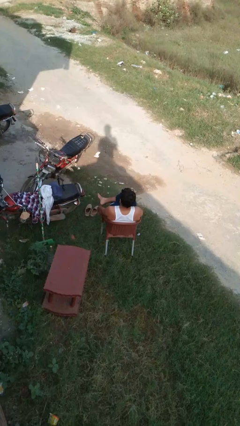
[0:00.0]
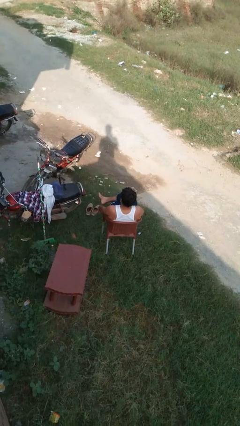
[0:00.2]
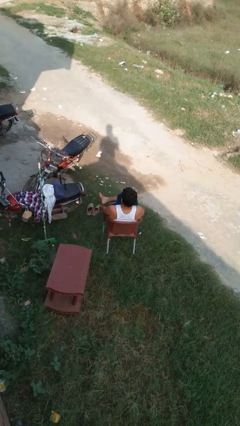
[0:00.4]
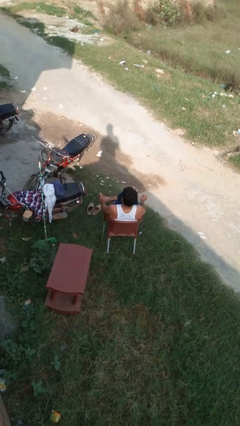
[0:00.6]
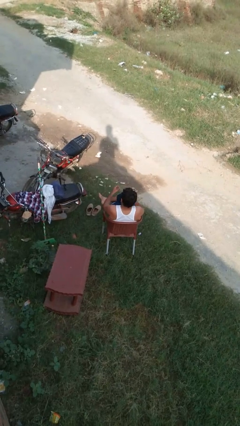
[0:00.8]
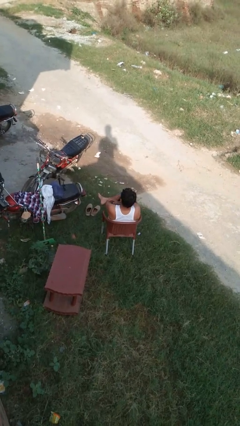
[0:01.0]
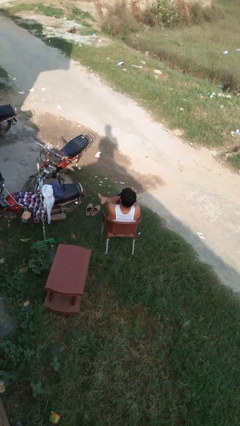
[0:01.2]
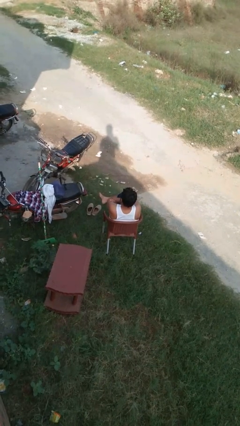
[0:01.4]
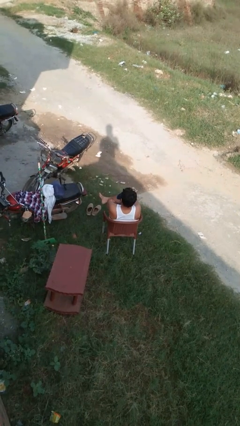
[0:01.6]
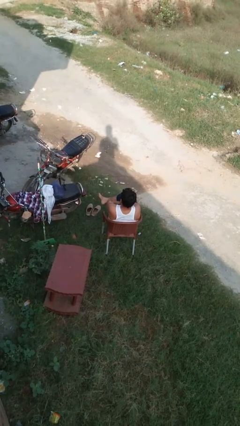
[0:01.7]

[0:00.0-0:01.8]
person crosses arms

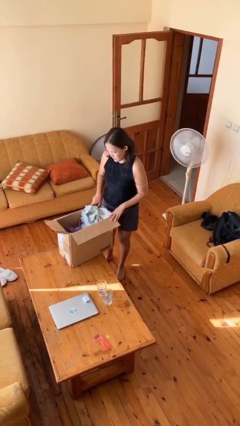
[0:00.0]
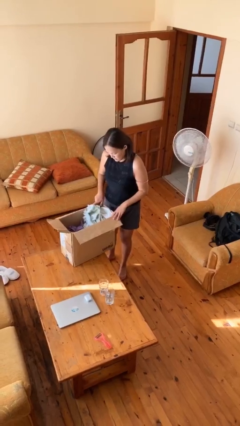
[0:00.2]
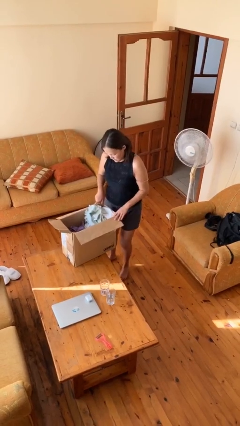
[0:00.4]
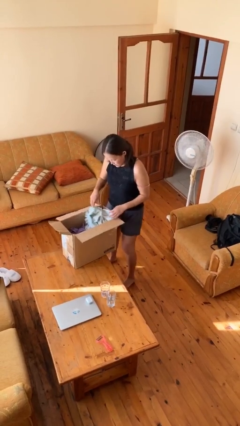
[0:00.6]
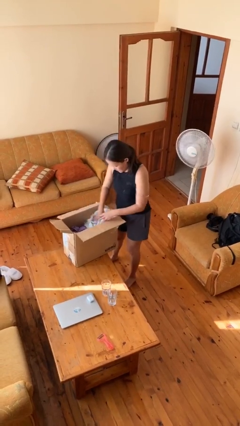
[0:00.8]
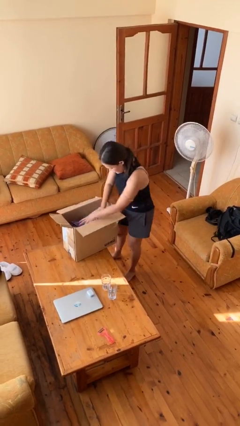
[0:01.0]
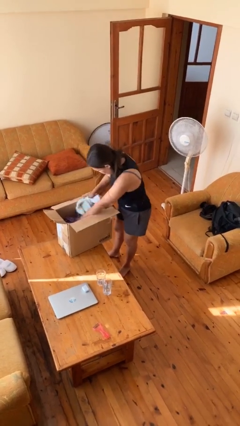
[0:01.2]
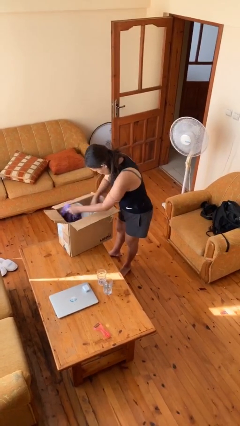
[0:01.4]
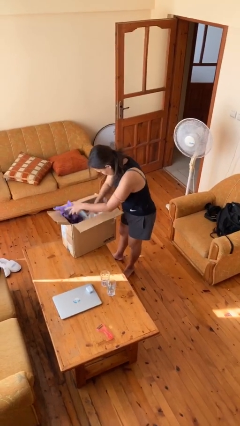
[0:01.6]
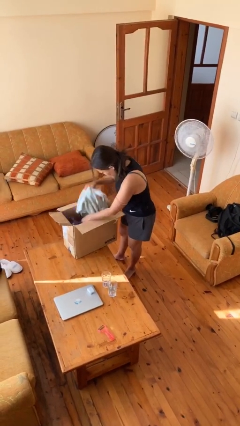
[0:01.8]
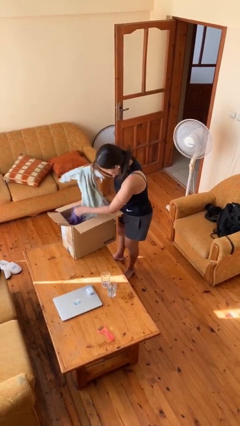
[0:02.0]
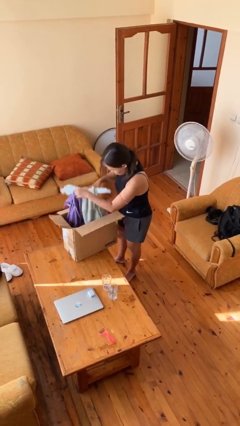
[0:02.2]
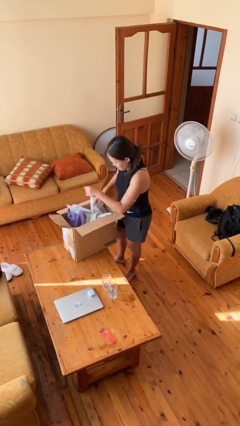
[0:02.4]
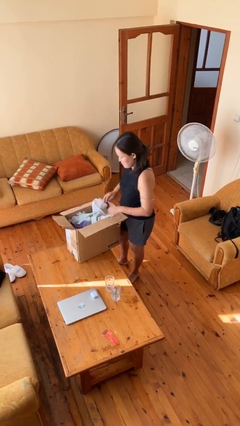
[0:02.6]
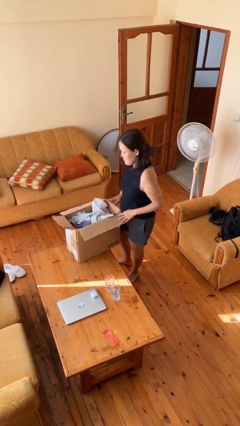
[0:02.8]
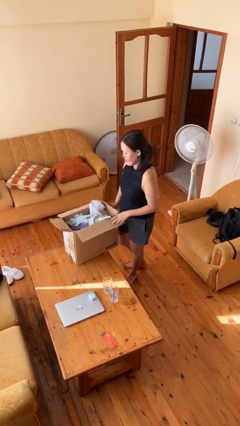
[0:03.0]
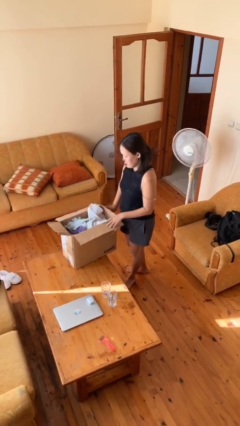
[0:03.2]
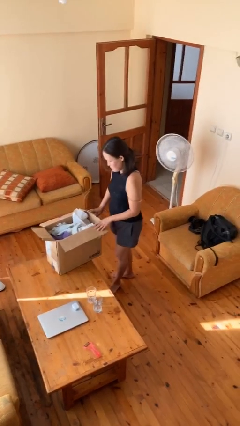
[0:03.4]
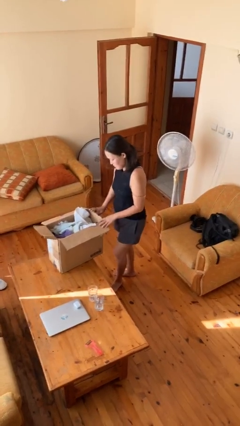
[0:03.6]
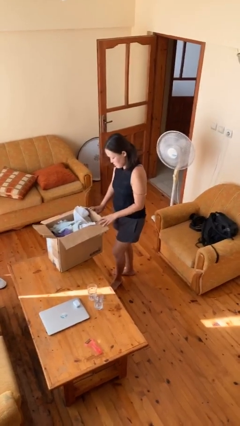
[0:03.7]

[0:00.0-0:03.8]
person searches in box

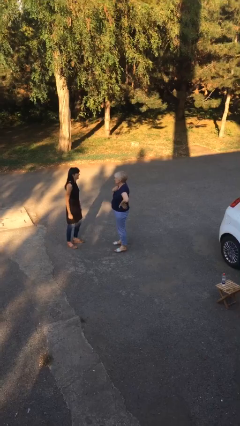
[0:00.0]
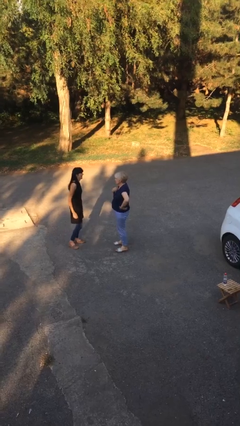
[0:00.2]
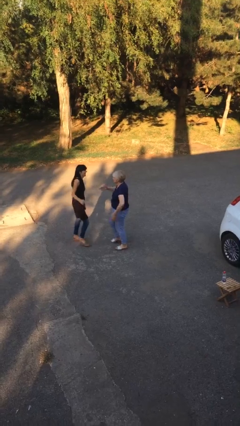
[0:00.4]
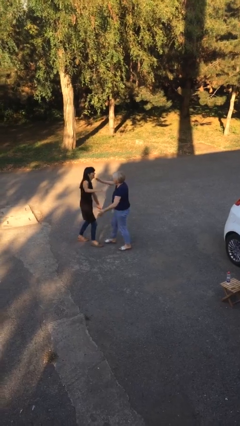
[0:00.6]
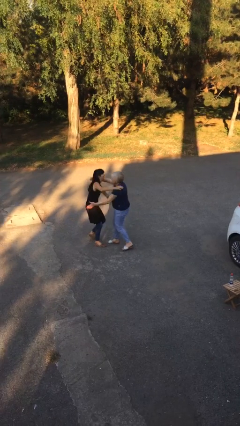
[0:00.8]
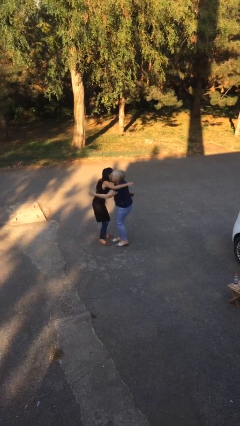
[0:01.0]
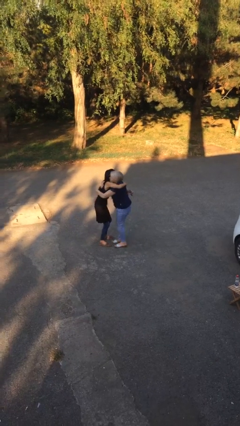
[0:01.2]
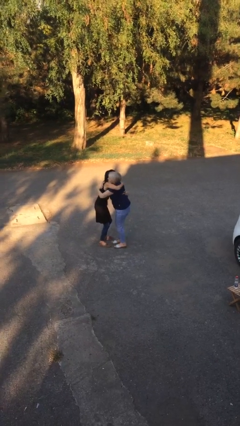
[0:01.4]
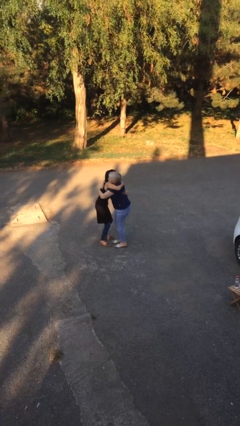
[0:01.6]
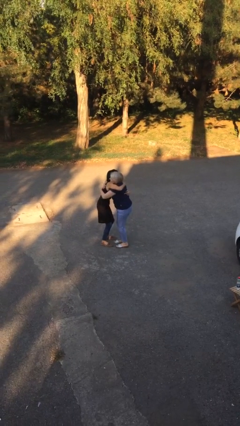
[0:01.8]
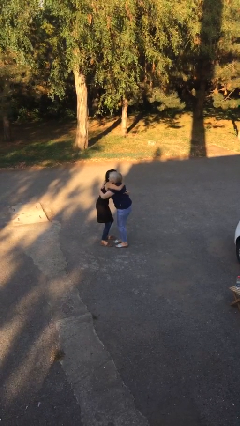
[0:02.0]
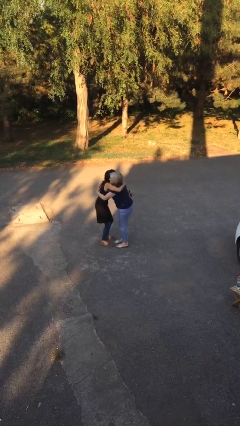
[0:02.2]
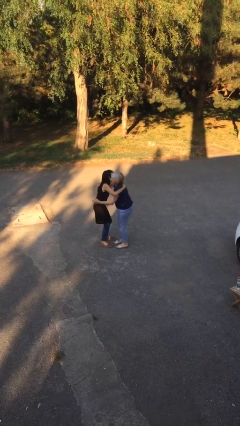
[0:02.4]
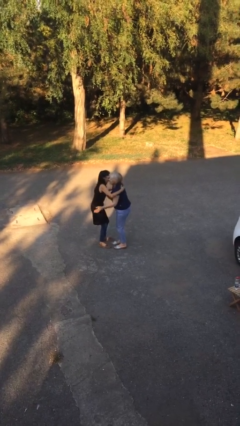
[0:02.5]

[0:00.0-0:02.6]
person embraces person

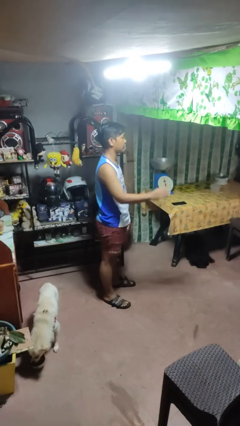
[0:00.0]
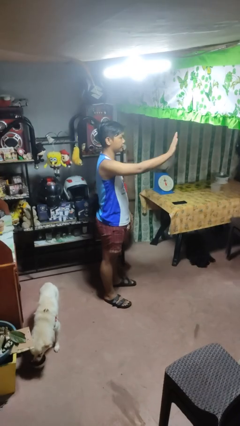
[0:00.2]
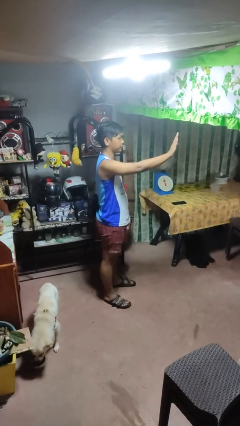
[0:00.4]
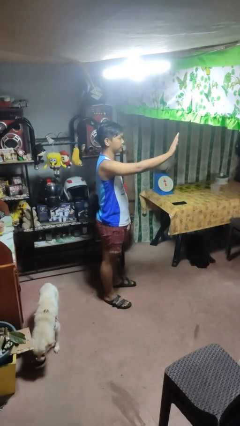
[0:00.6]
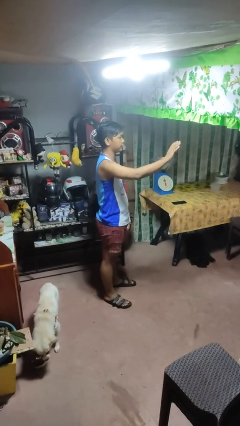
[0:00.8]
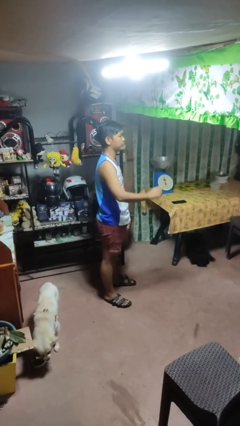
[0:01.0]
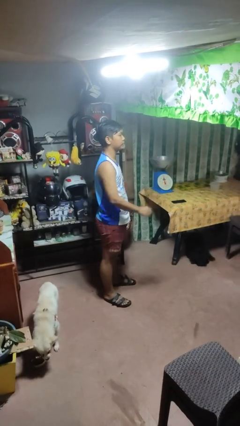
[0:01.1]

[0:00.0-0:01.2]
person gestures stop

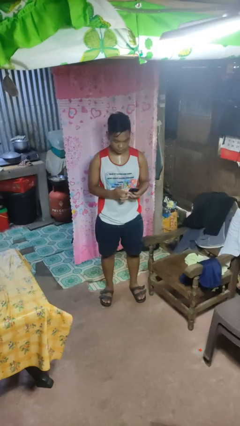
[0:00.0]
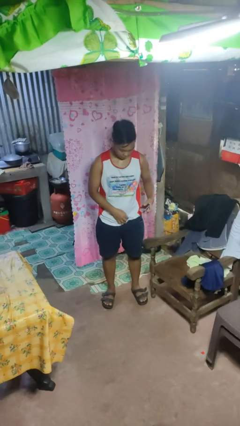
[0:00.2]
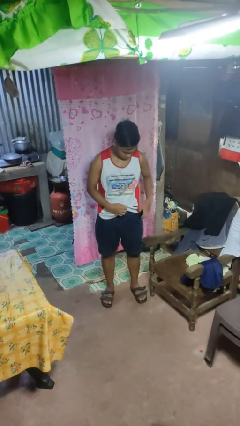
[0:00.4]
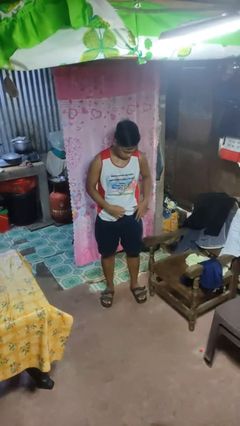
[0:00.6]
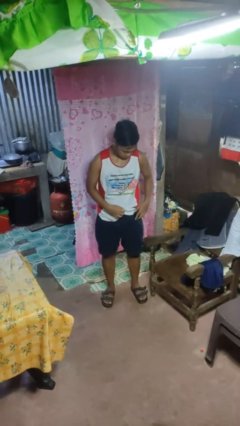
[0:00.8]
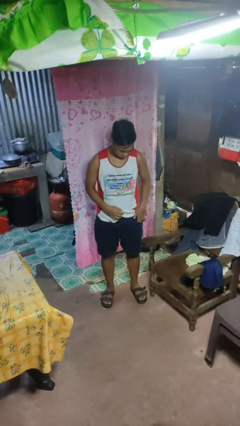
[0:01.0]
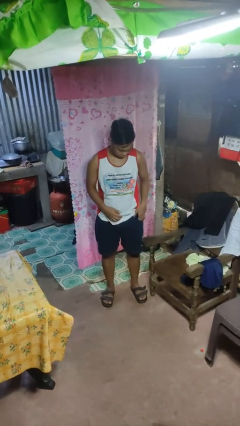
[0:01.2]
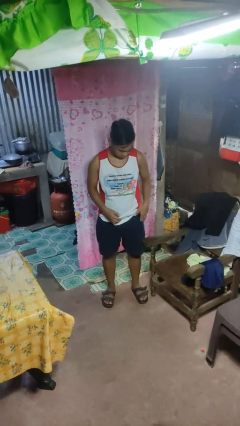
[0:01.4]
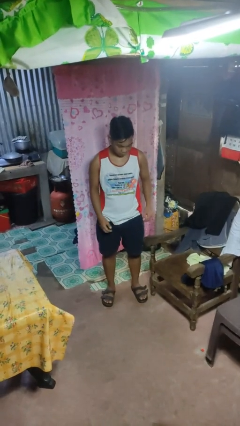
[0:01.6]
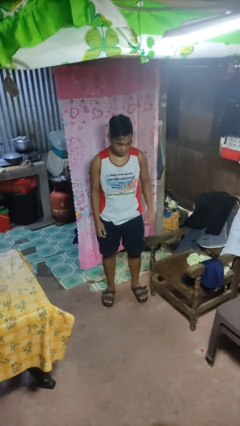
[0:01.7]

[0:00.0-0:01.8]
person puts phone into pocket

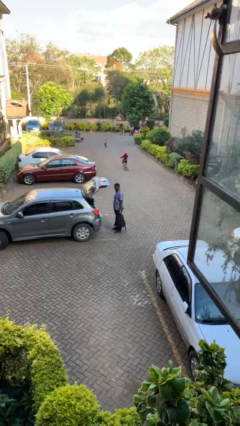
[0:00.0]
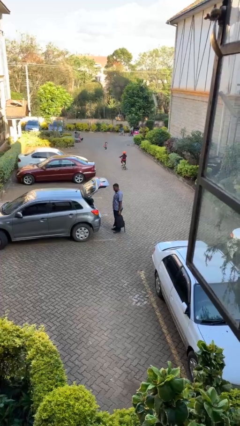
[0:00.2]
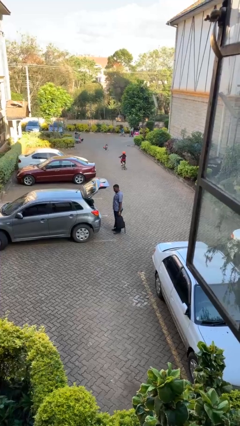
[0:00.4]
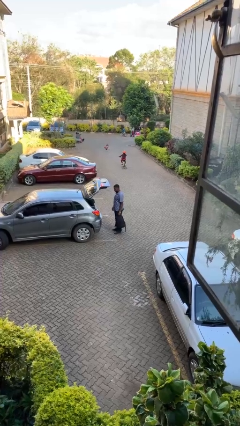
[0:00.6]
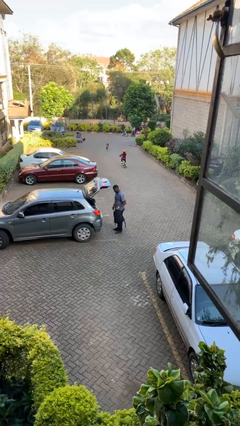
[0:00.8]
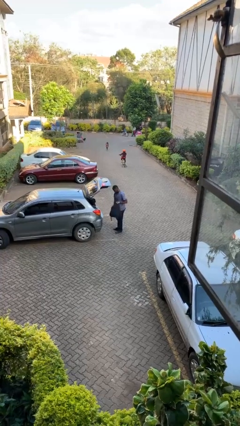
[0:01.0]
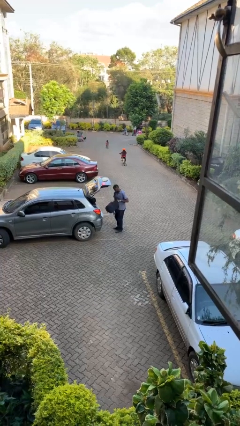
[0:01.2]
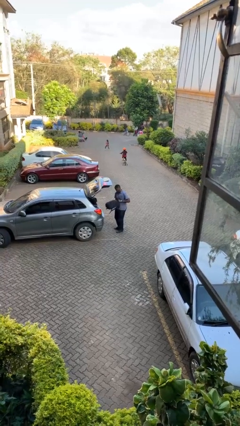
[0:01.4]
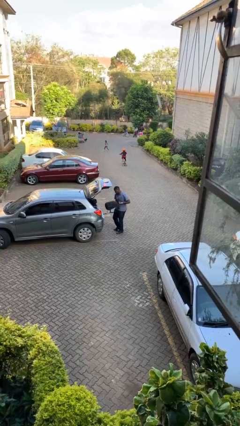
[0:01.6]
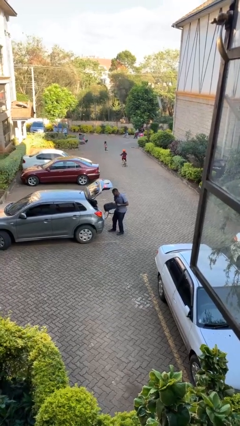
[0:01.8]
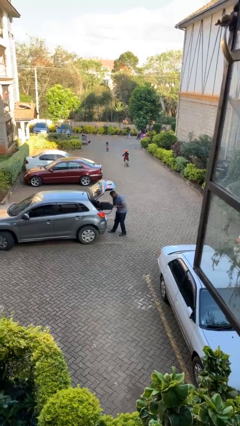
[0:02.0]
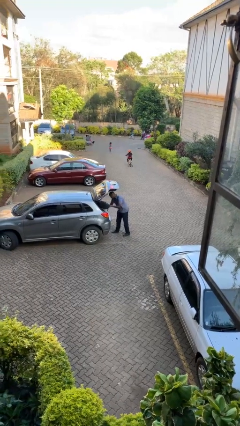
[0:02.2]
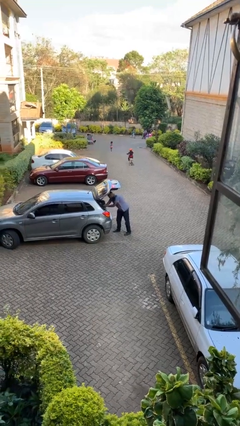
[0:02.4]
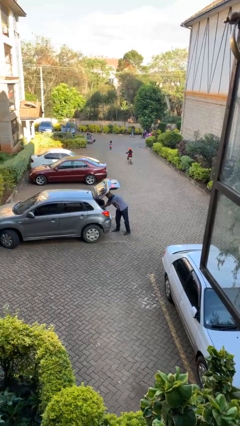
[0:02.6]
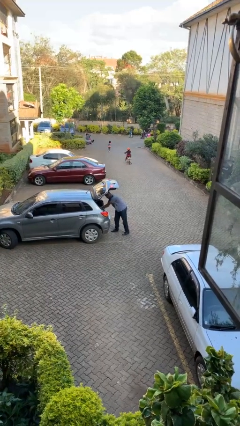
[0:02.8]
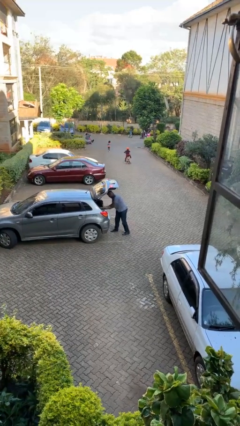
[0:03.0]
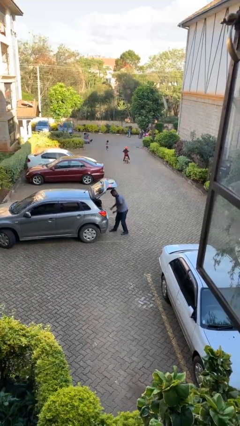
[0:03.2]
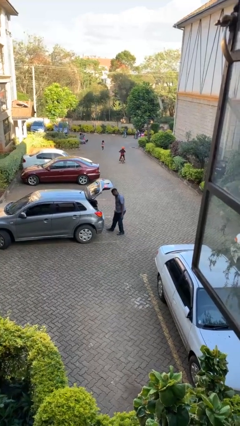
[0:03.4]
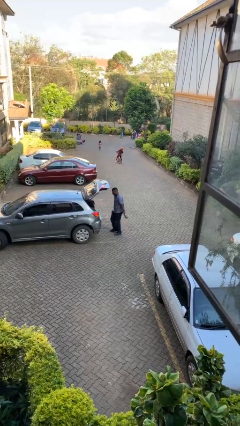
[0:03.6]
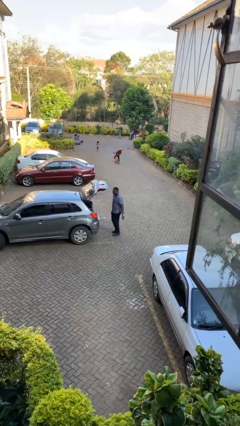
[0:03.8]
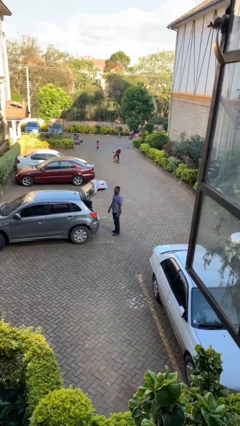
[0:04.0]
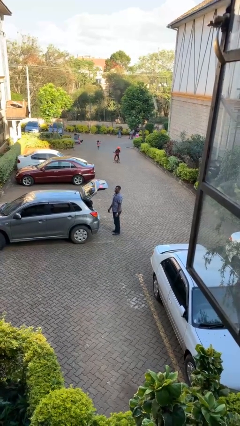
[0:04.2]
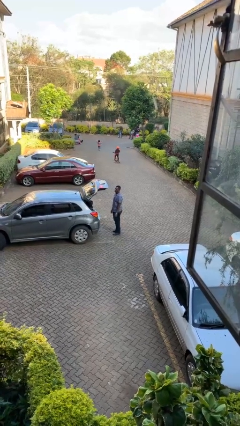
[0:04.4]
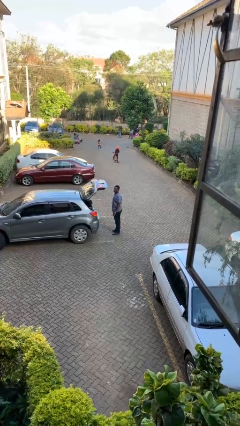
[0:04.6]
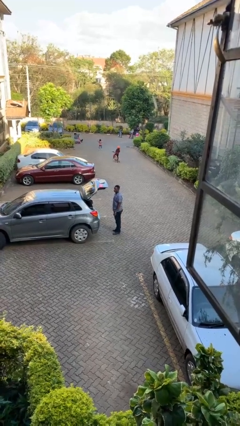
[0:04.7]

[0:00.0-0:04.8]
person loads car

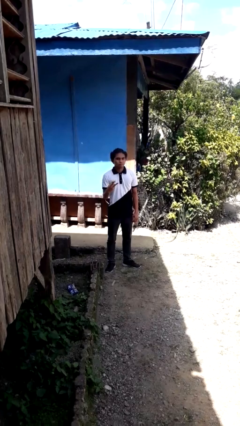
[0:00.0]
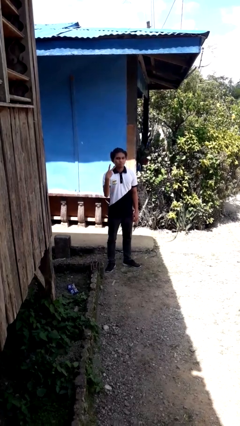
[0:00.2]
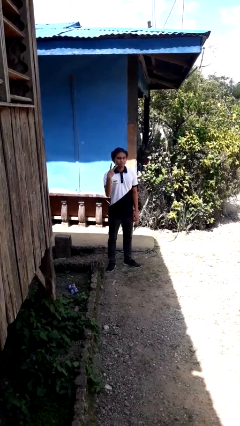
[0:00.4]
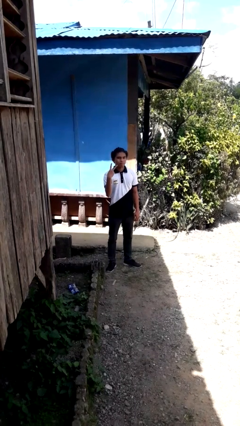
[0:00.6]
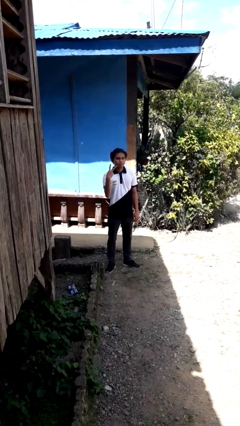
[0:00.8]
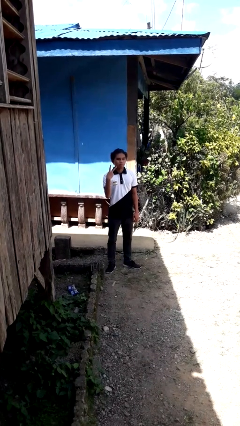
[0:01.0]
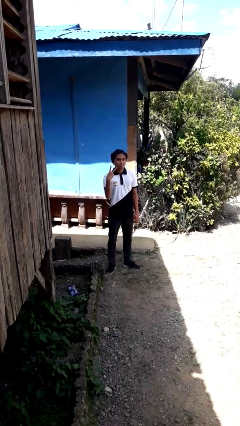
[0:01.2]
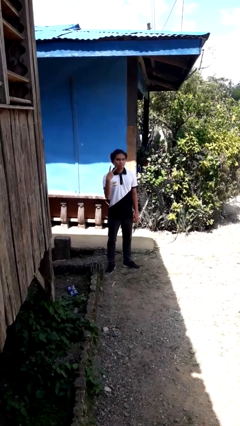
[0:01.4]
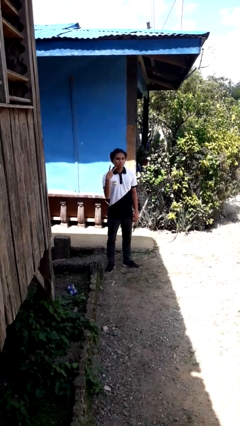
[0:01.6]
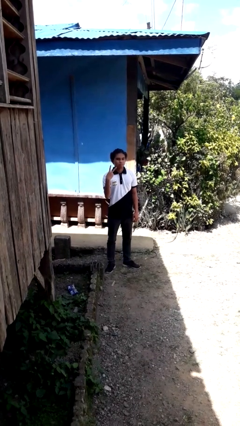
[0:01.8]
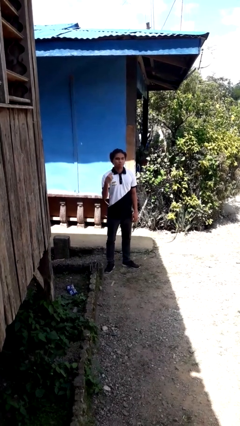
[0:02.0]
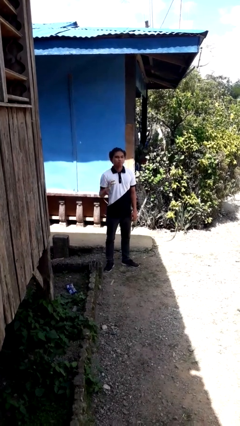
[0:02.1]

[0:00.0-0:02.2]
person gestures peace
